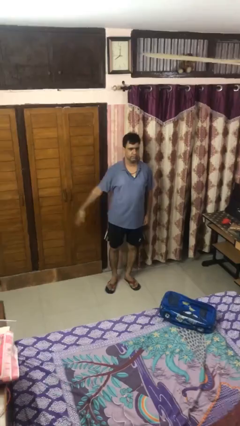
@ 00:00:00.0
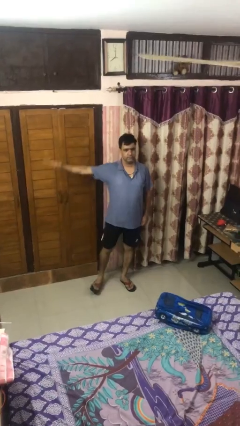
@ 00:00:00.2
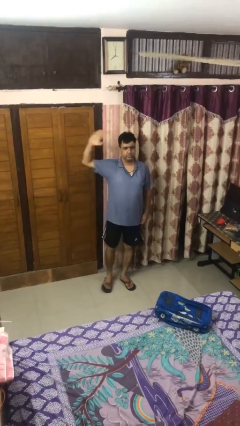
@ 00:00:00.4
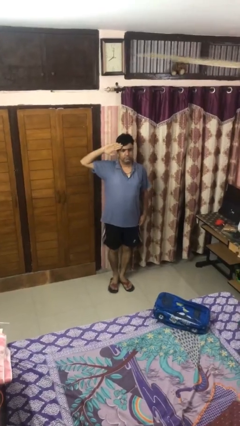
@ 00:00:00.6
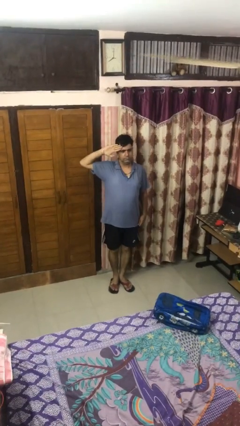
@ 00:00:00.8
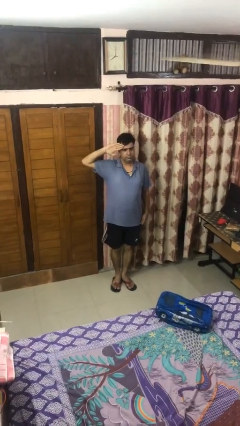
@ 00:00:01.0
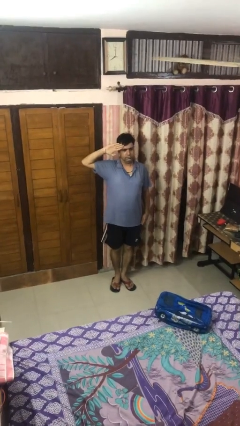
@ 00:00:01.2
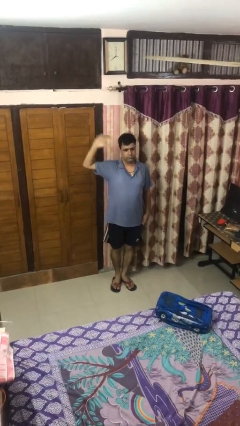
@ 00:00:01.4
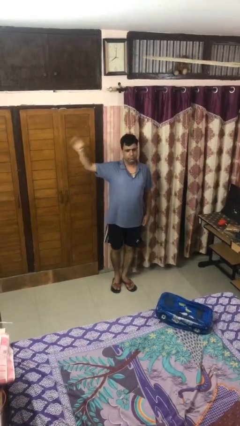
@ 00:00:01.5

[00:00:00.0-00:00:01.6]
person salutes

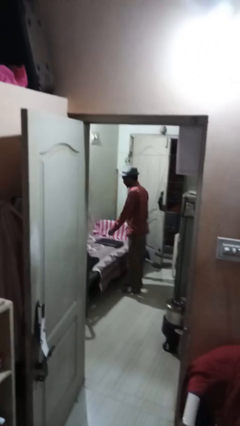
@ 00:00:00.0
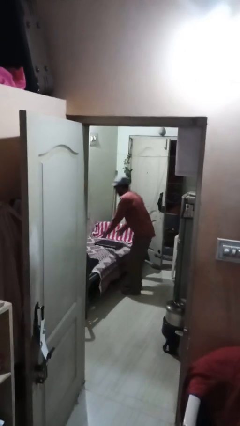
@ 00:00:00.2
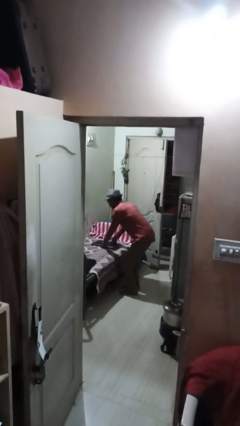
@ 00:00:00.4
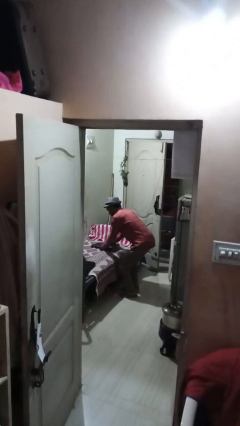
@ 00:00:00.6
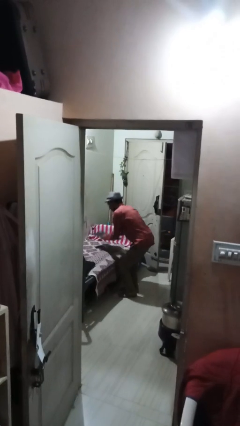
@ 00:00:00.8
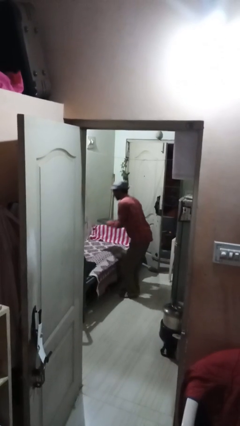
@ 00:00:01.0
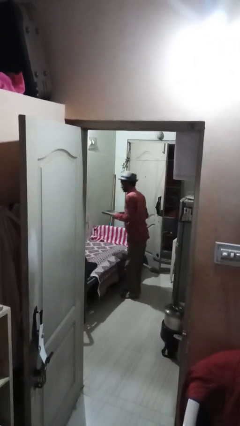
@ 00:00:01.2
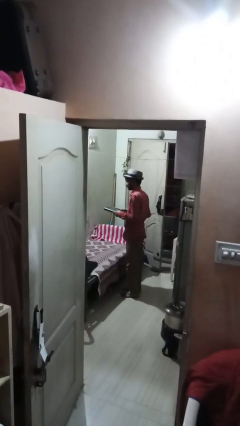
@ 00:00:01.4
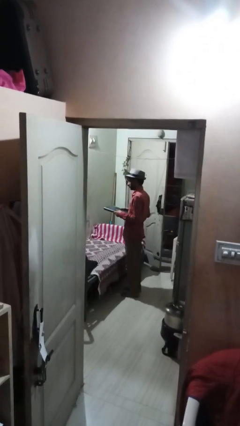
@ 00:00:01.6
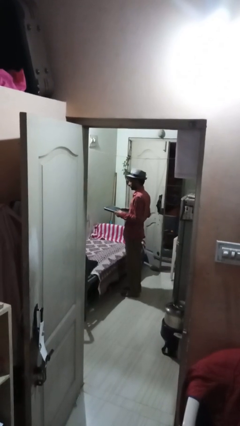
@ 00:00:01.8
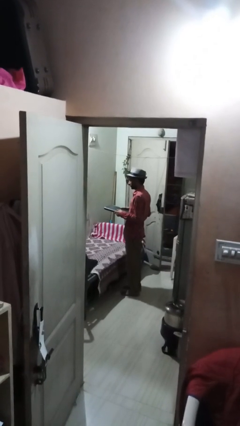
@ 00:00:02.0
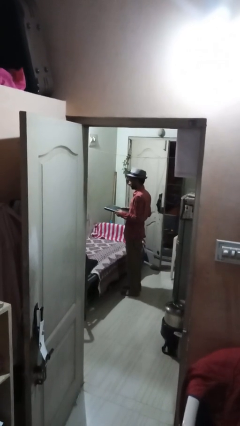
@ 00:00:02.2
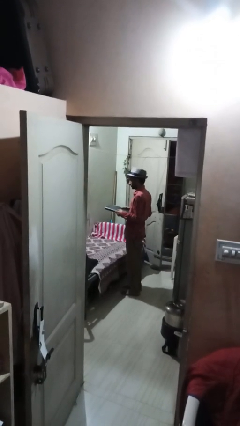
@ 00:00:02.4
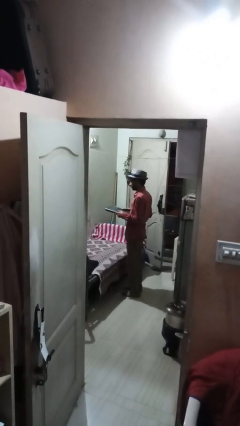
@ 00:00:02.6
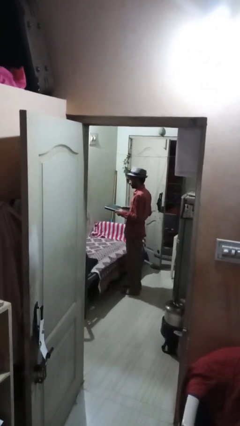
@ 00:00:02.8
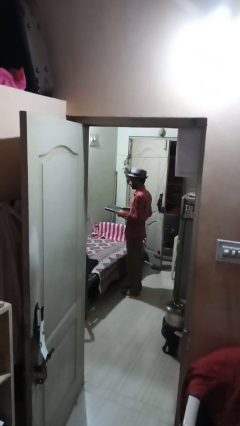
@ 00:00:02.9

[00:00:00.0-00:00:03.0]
person picks up object from couch

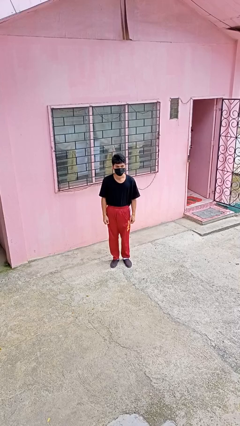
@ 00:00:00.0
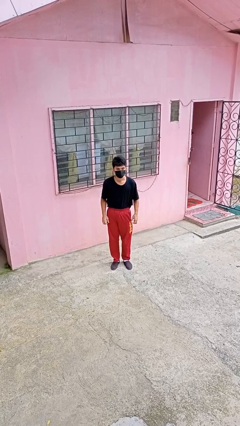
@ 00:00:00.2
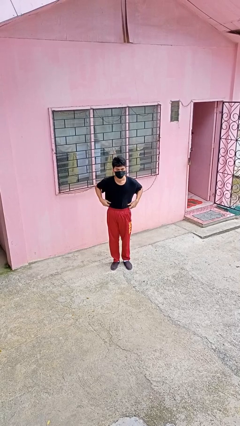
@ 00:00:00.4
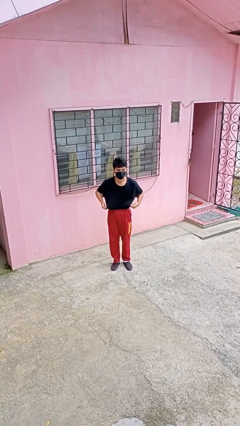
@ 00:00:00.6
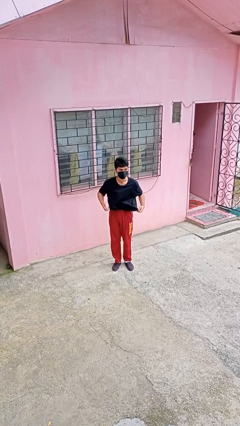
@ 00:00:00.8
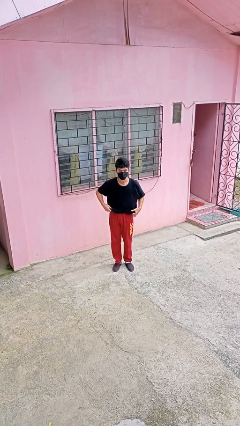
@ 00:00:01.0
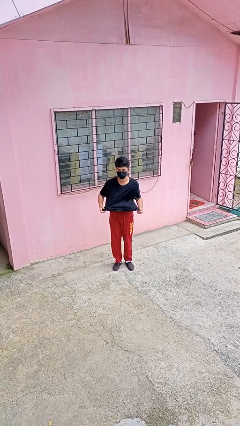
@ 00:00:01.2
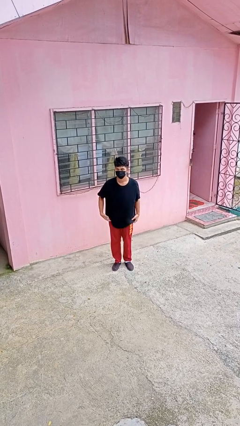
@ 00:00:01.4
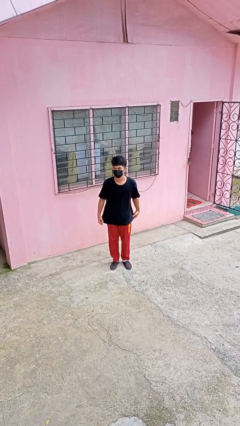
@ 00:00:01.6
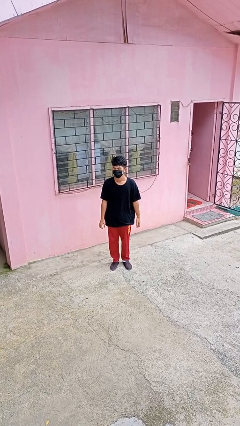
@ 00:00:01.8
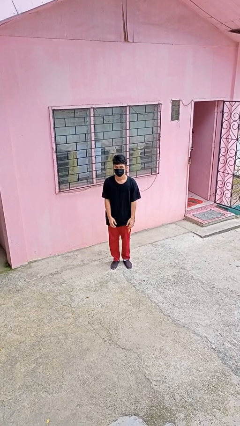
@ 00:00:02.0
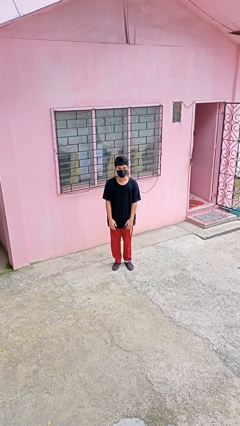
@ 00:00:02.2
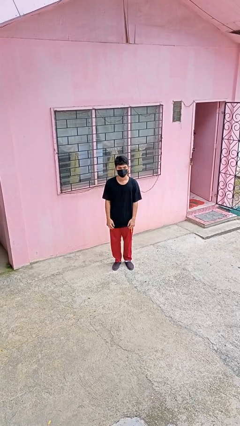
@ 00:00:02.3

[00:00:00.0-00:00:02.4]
person untucks shirt

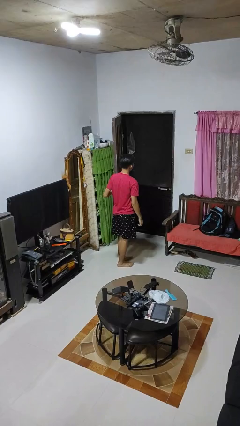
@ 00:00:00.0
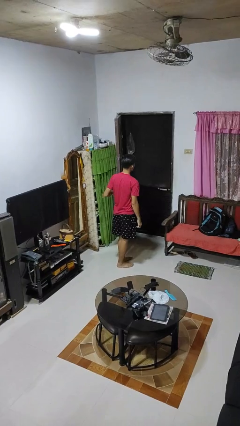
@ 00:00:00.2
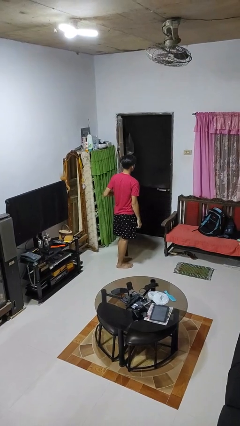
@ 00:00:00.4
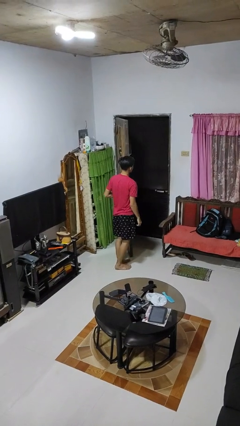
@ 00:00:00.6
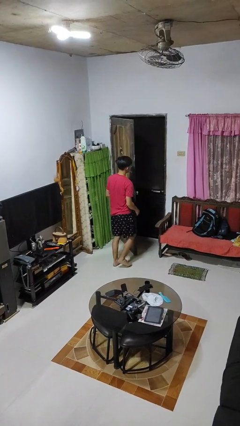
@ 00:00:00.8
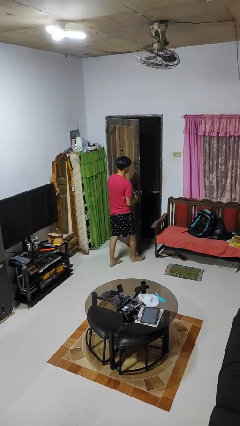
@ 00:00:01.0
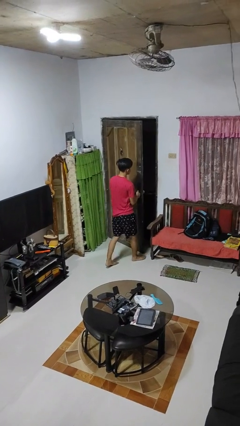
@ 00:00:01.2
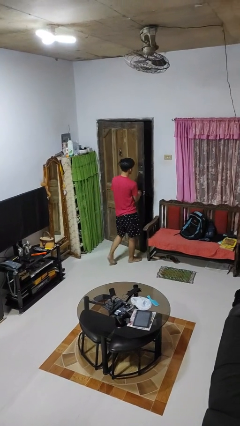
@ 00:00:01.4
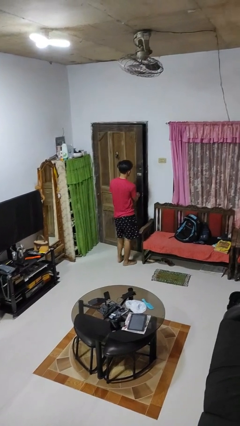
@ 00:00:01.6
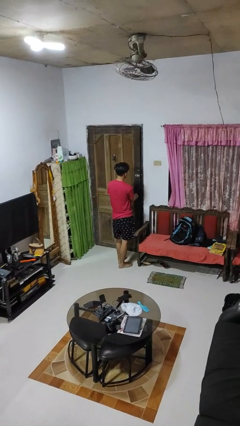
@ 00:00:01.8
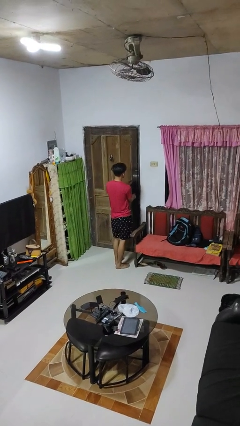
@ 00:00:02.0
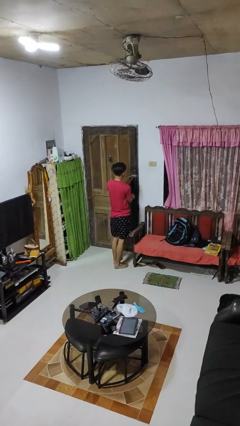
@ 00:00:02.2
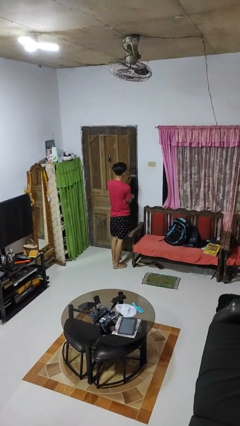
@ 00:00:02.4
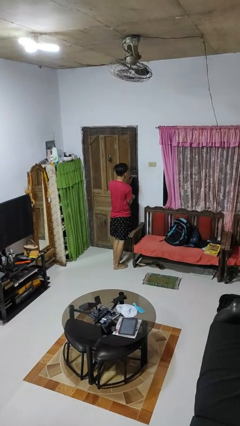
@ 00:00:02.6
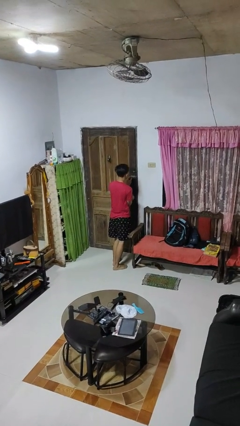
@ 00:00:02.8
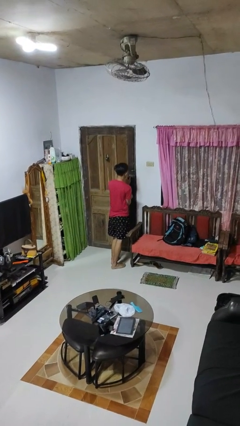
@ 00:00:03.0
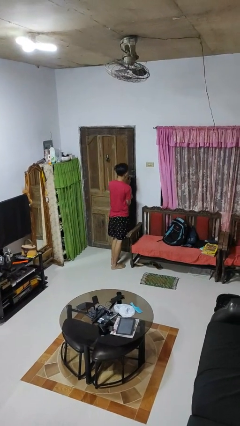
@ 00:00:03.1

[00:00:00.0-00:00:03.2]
person closes facility door

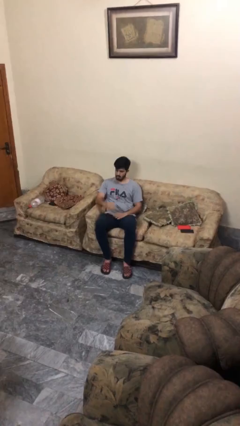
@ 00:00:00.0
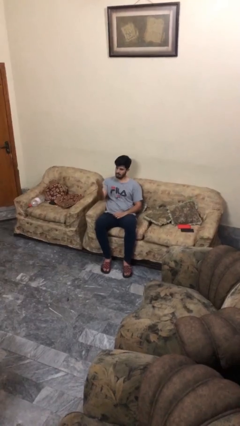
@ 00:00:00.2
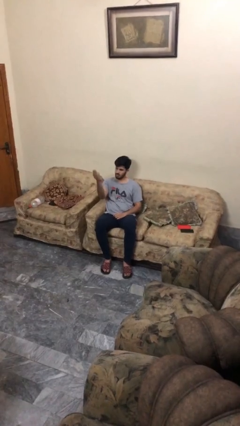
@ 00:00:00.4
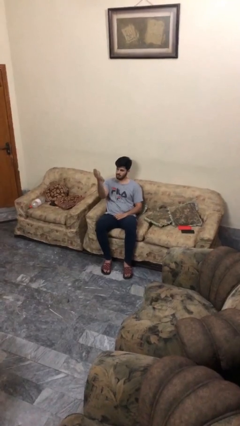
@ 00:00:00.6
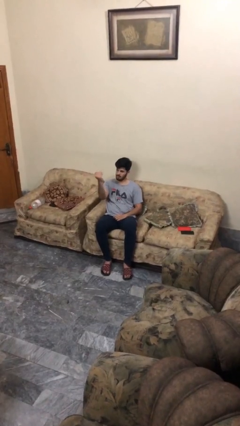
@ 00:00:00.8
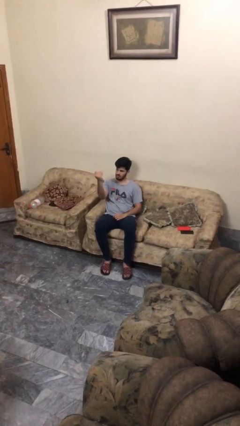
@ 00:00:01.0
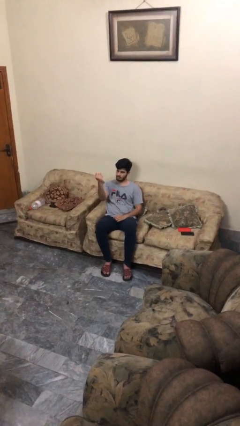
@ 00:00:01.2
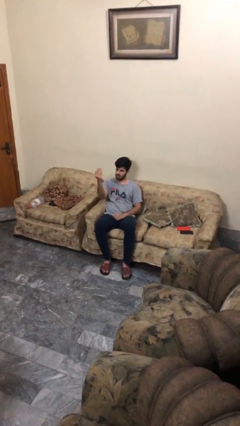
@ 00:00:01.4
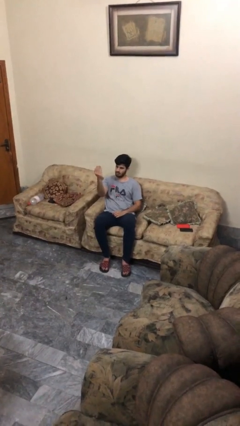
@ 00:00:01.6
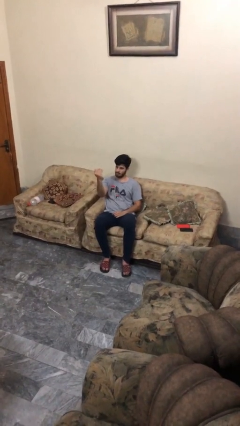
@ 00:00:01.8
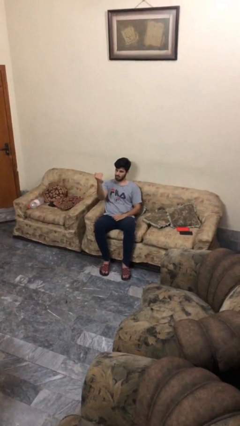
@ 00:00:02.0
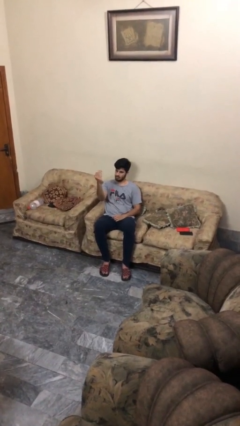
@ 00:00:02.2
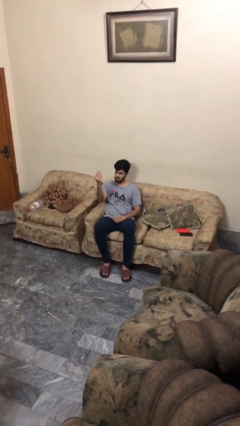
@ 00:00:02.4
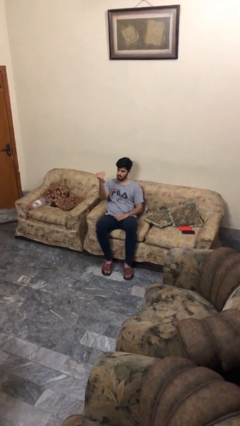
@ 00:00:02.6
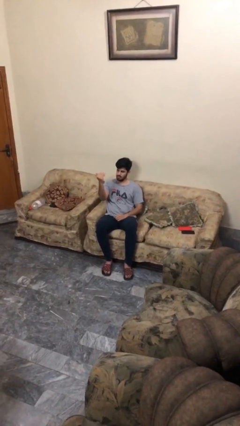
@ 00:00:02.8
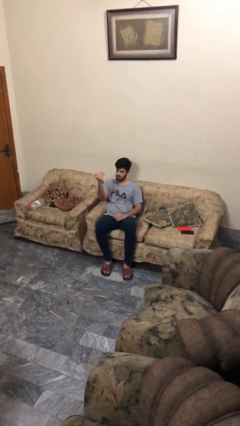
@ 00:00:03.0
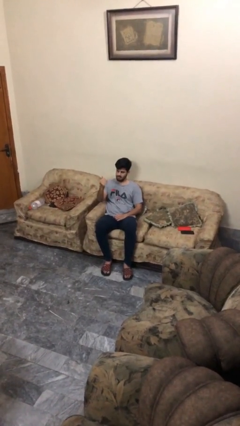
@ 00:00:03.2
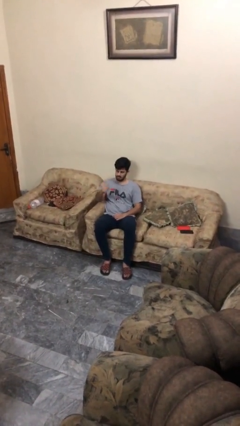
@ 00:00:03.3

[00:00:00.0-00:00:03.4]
person gestures come here

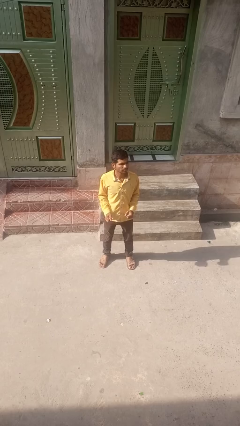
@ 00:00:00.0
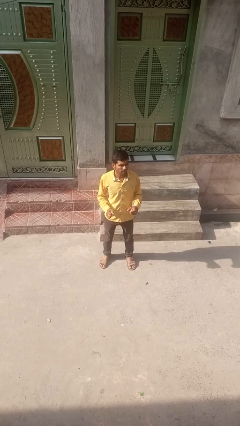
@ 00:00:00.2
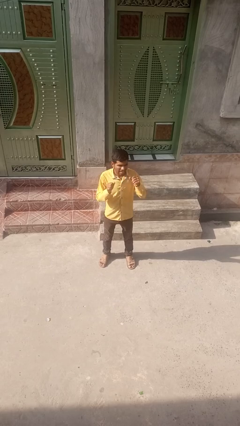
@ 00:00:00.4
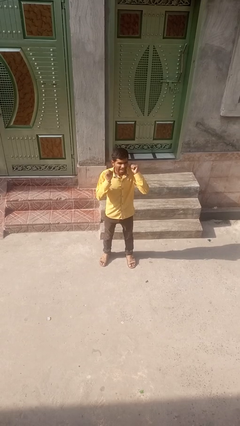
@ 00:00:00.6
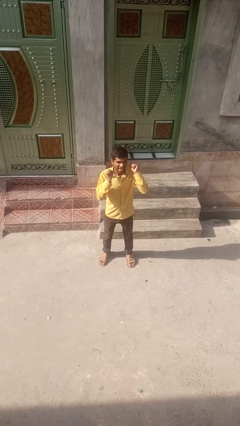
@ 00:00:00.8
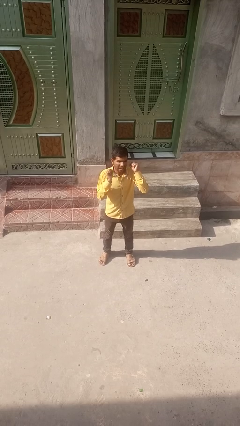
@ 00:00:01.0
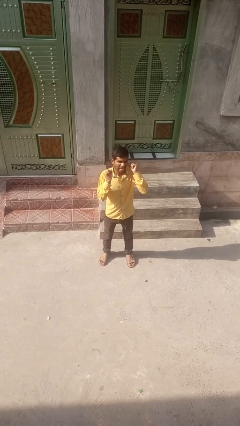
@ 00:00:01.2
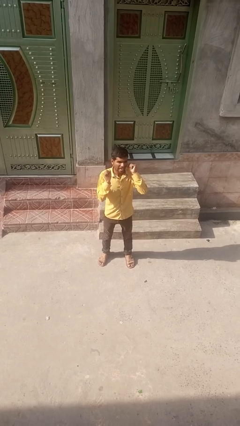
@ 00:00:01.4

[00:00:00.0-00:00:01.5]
person flosses

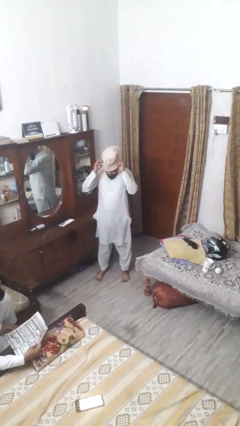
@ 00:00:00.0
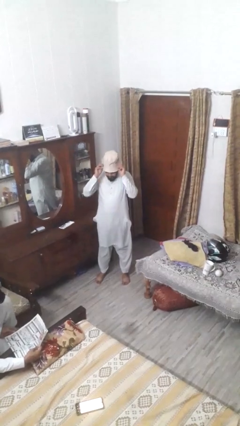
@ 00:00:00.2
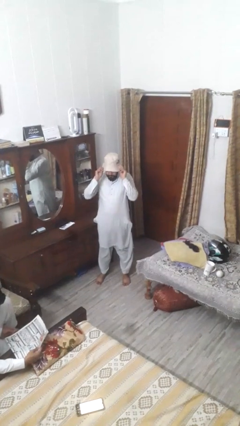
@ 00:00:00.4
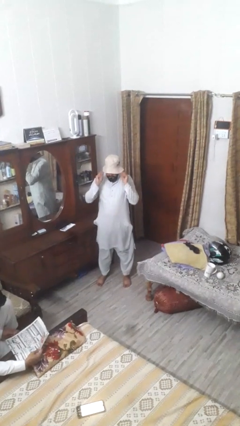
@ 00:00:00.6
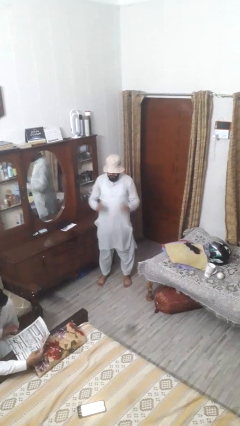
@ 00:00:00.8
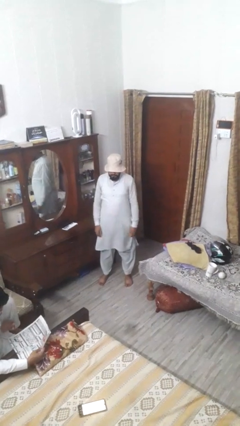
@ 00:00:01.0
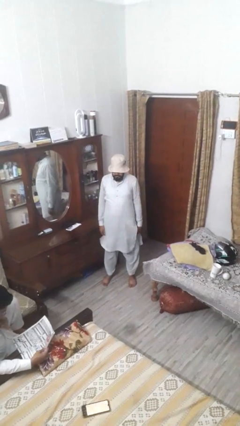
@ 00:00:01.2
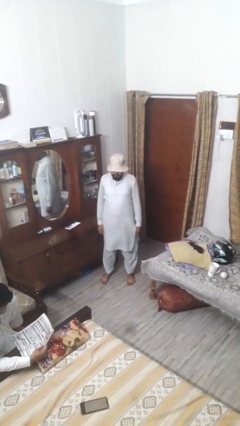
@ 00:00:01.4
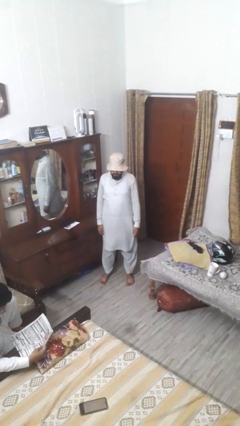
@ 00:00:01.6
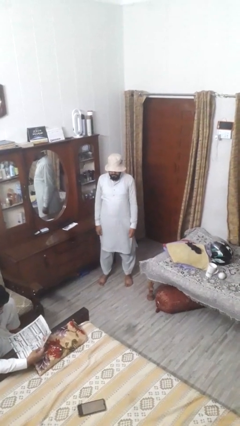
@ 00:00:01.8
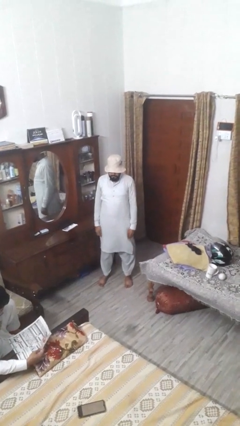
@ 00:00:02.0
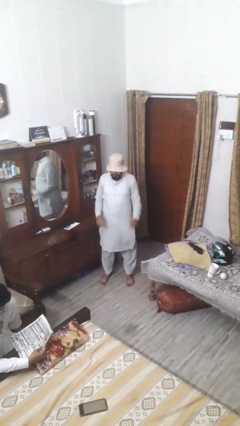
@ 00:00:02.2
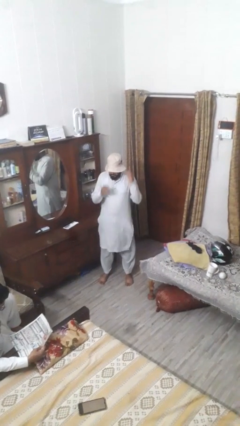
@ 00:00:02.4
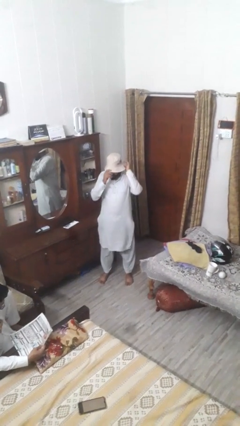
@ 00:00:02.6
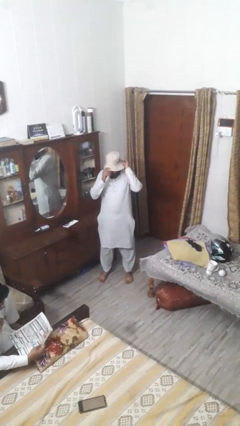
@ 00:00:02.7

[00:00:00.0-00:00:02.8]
person puts on hat
